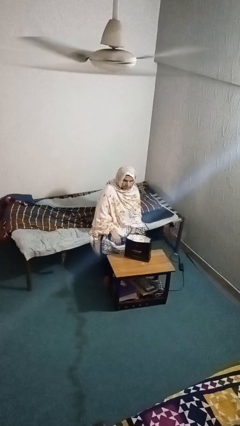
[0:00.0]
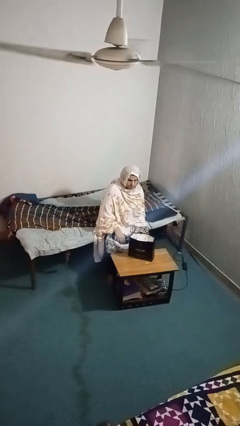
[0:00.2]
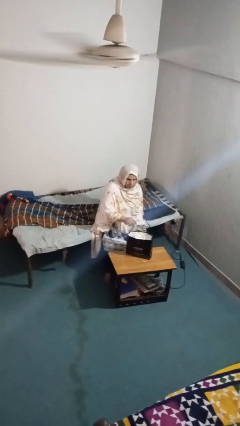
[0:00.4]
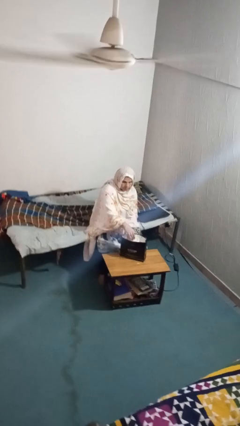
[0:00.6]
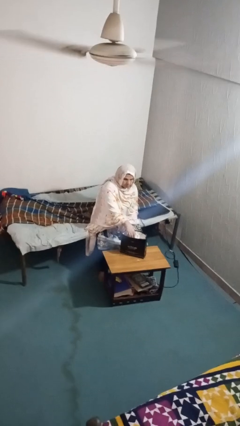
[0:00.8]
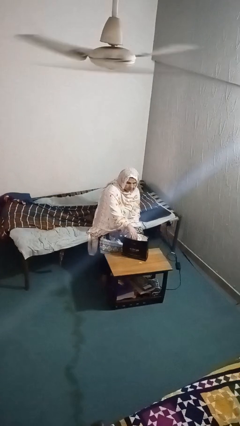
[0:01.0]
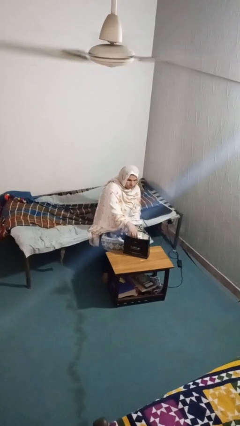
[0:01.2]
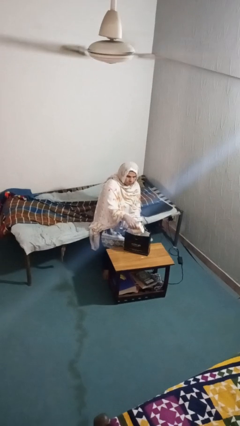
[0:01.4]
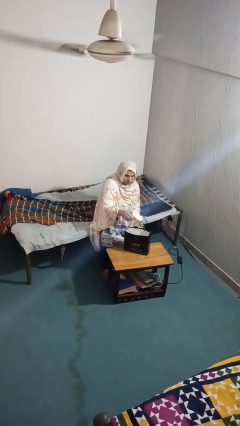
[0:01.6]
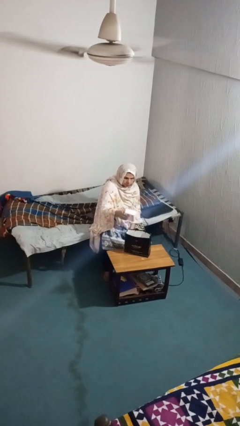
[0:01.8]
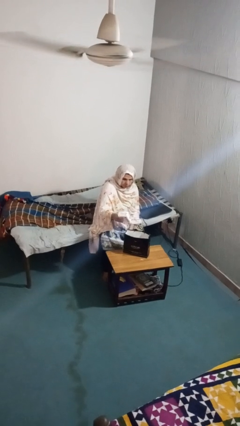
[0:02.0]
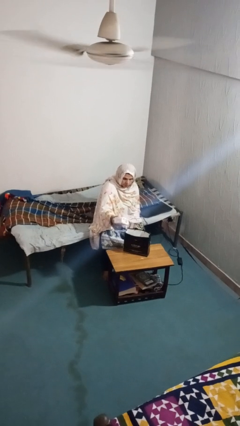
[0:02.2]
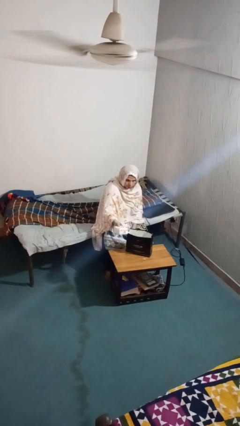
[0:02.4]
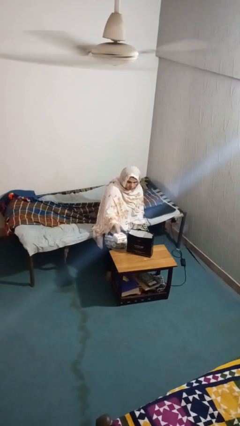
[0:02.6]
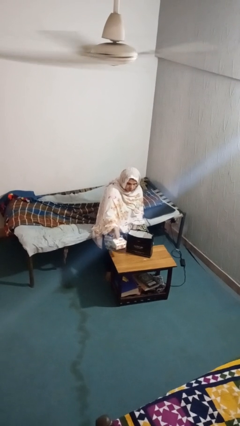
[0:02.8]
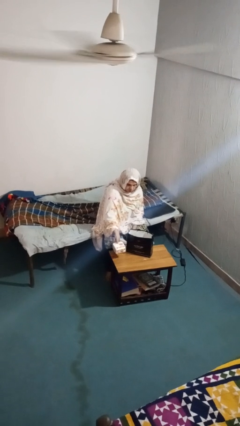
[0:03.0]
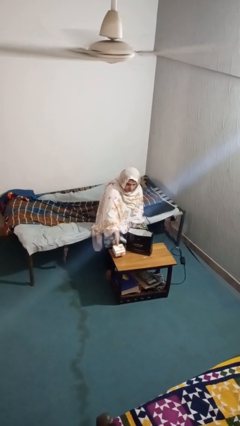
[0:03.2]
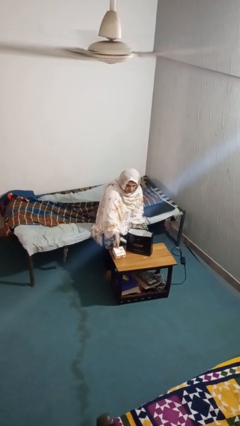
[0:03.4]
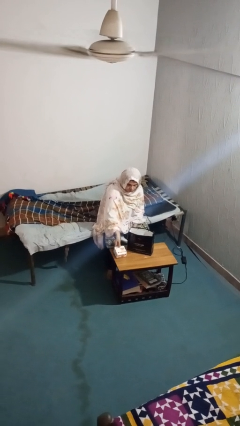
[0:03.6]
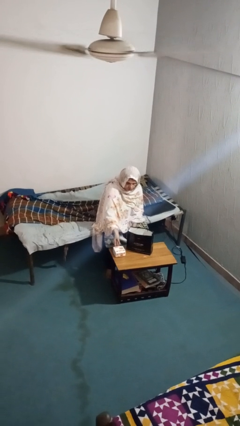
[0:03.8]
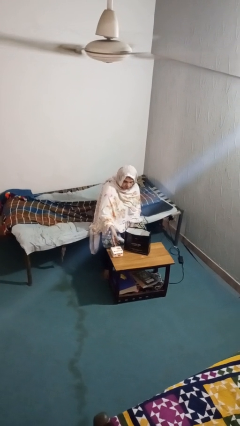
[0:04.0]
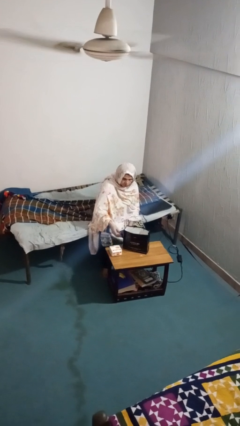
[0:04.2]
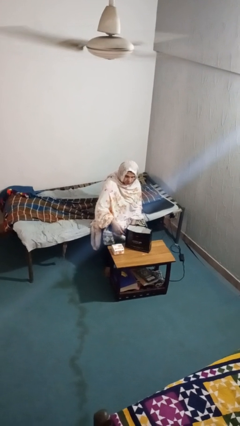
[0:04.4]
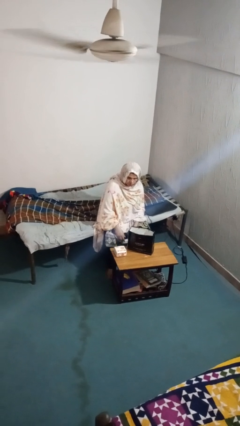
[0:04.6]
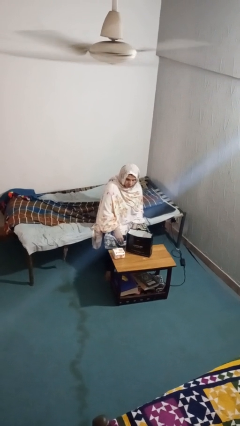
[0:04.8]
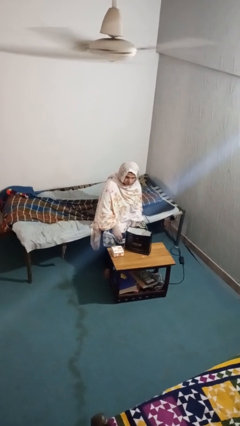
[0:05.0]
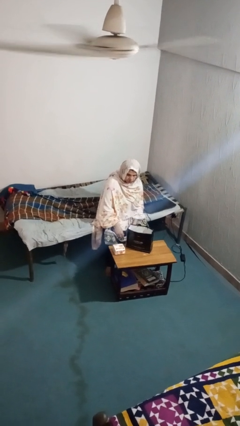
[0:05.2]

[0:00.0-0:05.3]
person takes object from bag

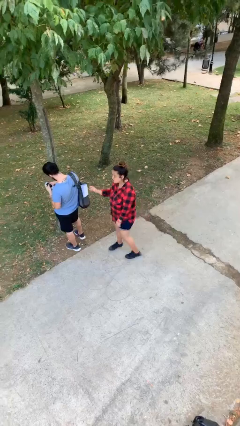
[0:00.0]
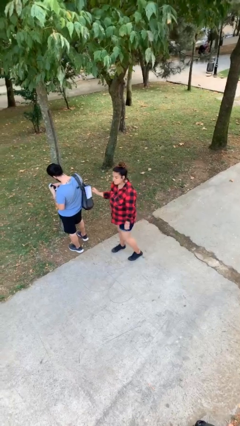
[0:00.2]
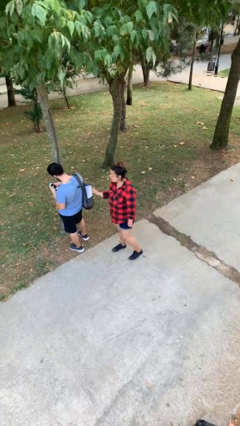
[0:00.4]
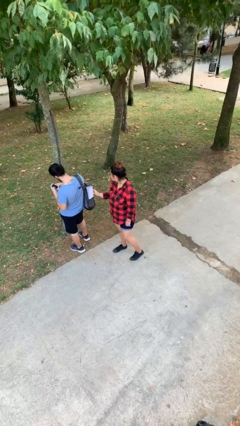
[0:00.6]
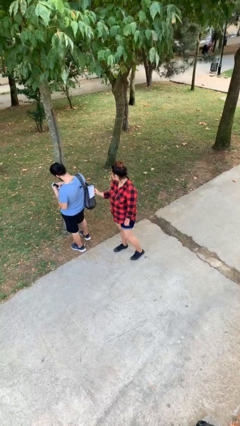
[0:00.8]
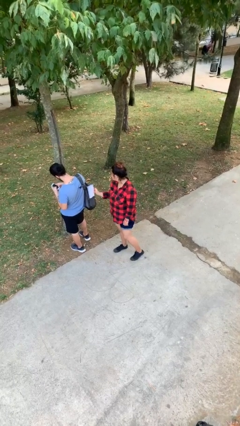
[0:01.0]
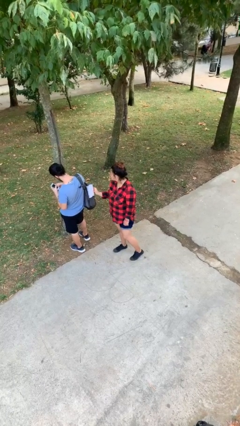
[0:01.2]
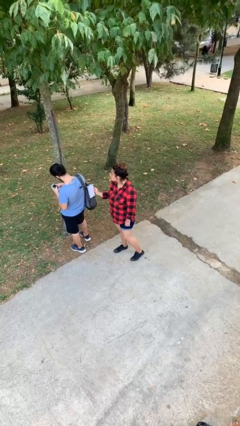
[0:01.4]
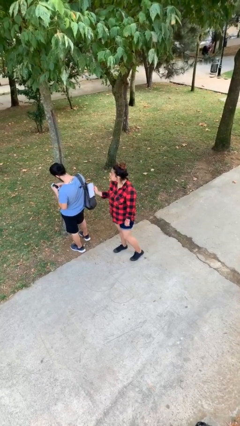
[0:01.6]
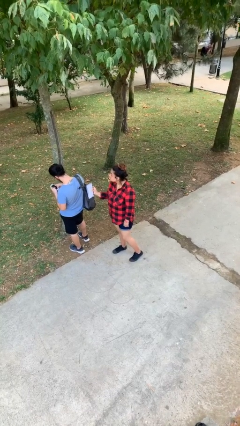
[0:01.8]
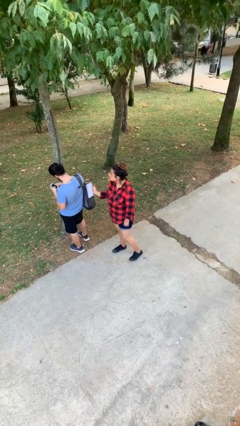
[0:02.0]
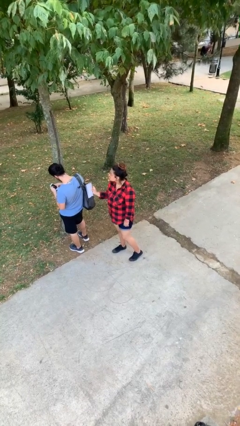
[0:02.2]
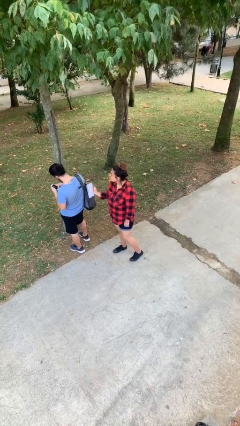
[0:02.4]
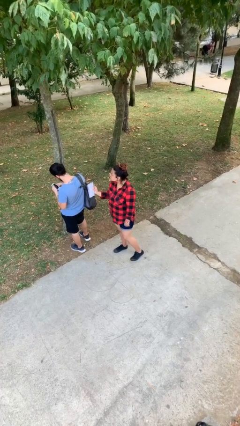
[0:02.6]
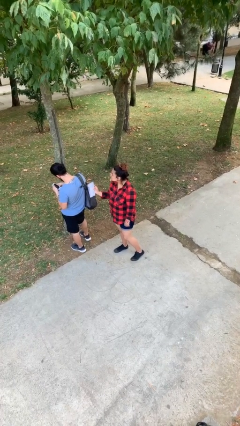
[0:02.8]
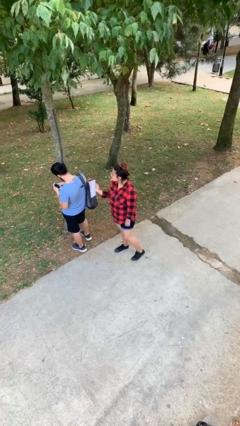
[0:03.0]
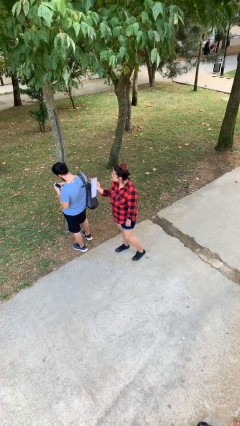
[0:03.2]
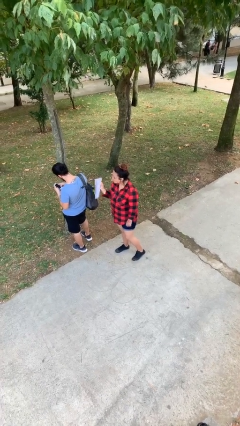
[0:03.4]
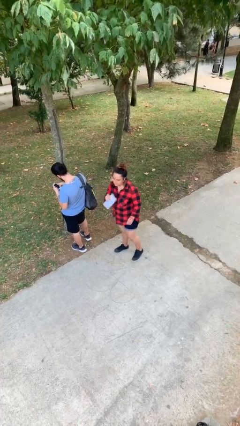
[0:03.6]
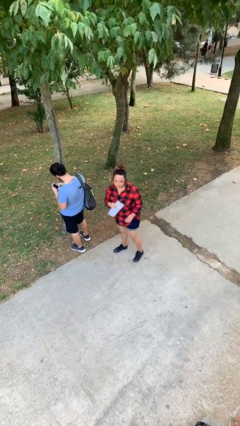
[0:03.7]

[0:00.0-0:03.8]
person steals object from person

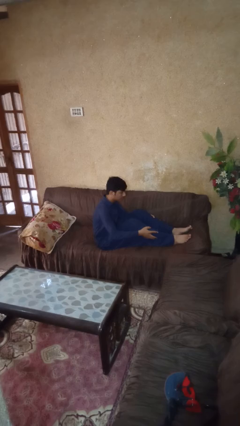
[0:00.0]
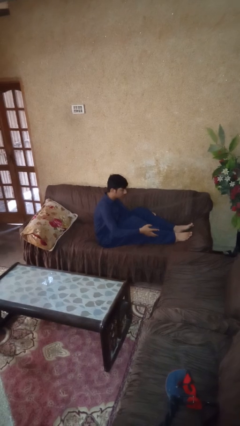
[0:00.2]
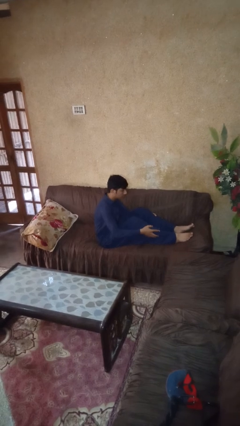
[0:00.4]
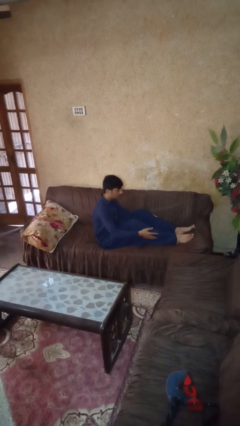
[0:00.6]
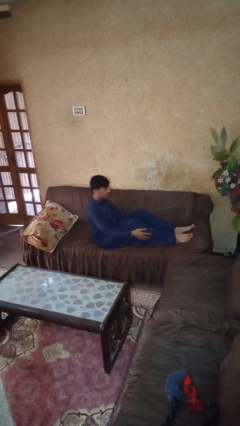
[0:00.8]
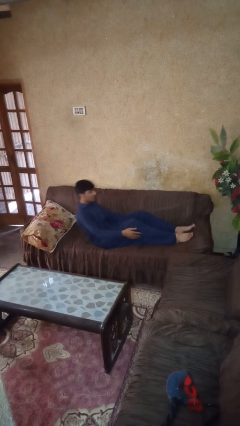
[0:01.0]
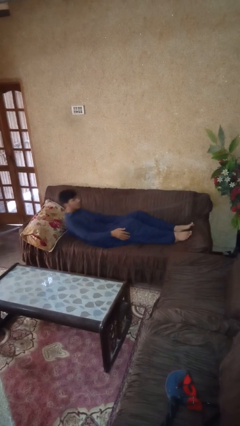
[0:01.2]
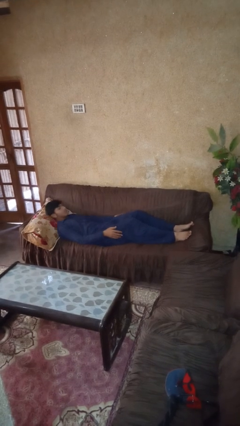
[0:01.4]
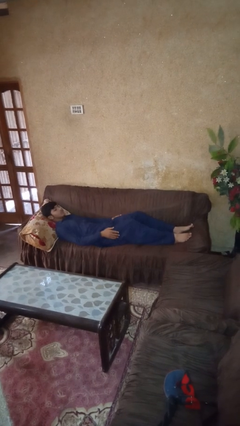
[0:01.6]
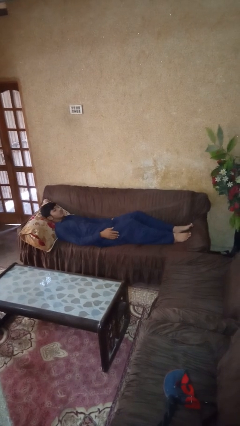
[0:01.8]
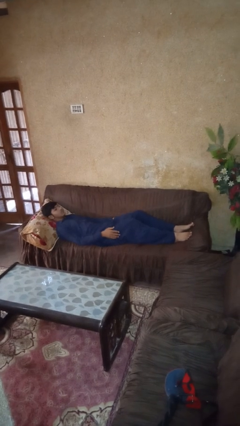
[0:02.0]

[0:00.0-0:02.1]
person lies down on couch

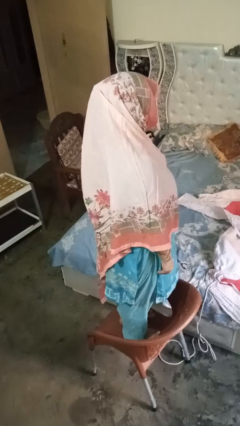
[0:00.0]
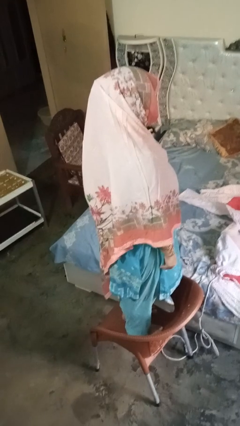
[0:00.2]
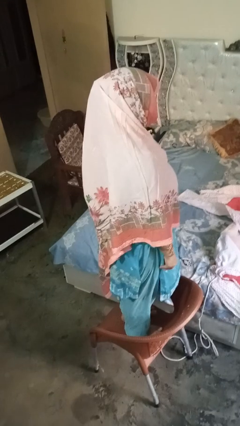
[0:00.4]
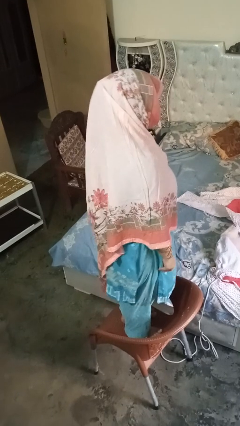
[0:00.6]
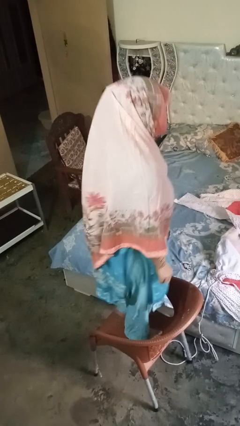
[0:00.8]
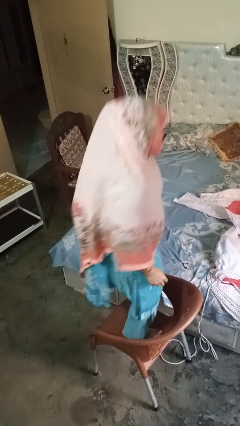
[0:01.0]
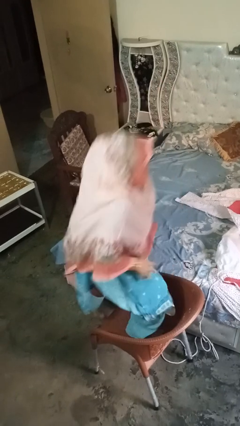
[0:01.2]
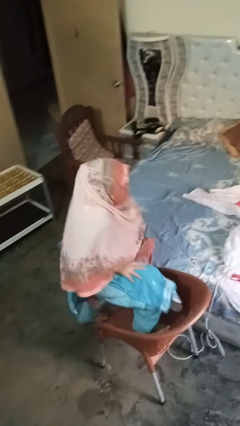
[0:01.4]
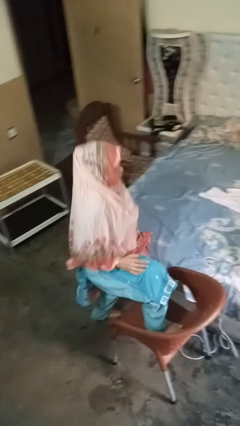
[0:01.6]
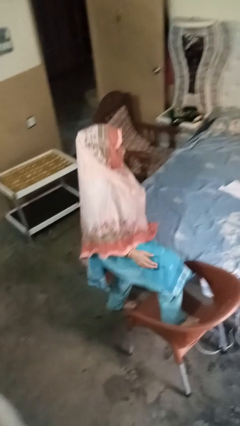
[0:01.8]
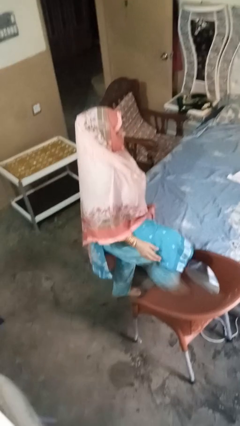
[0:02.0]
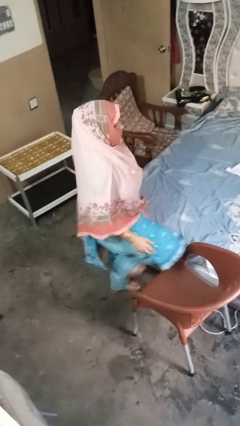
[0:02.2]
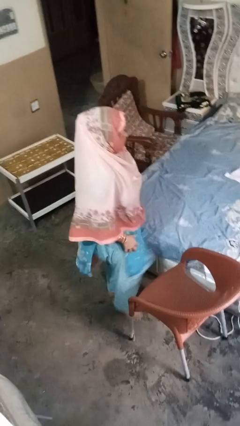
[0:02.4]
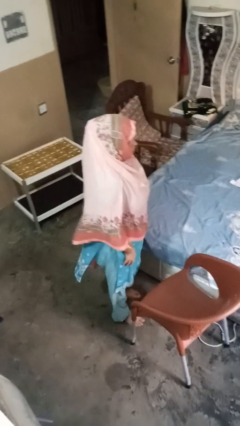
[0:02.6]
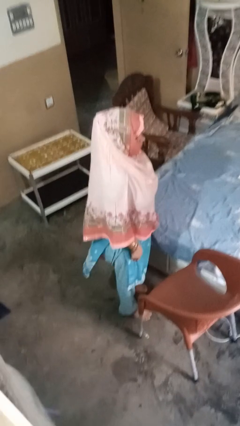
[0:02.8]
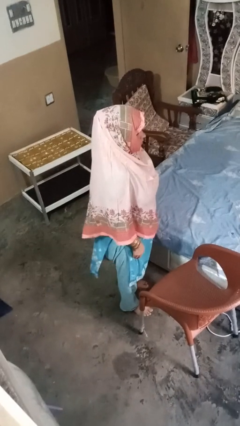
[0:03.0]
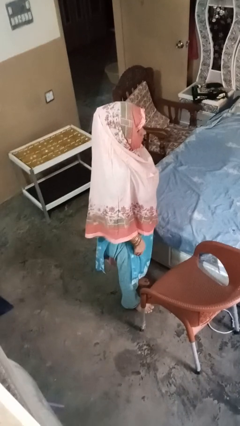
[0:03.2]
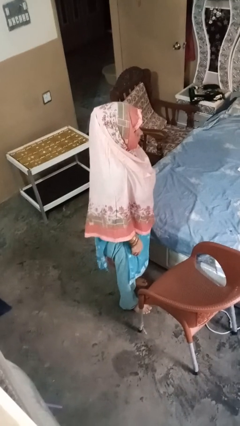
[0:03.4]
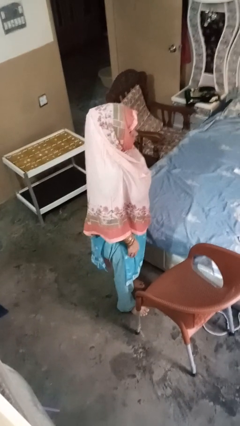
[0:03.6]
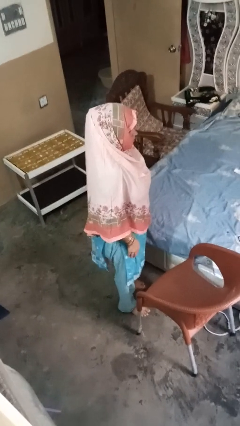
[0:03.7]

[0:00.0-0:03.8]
person climbs off chair

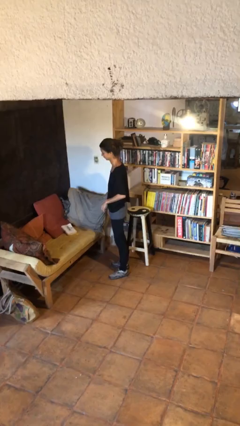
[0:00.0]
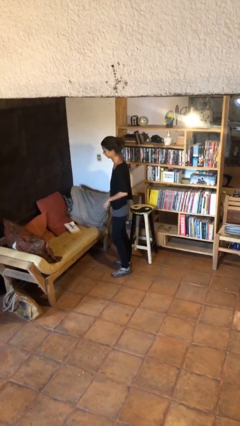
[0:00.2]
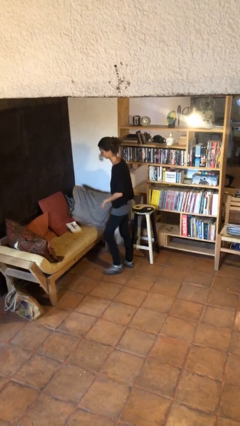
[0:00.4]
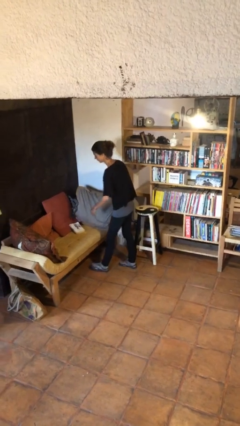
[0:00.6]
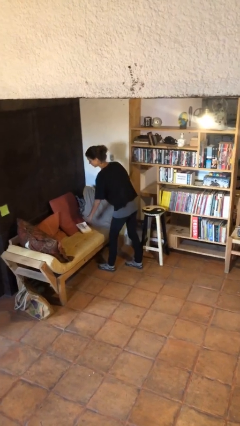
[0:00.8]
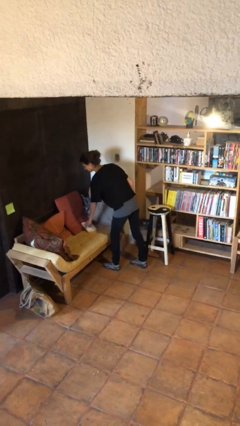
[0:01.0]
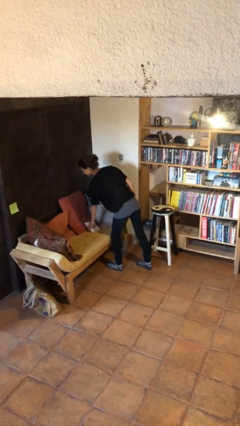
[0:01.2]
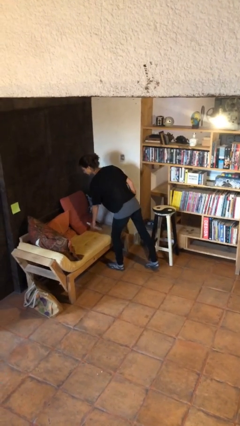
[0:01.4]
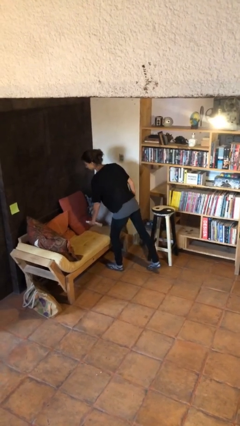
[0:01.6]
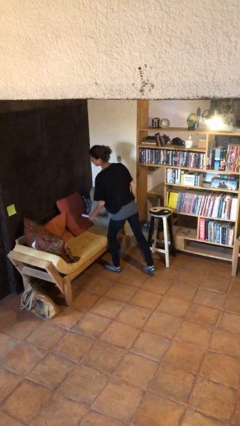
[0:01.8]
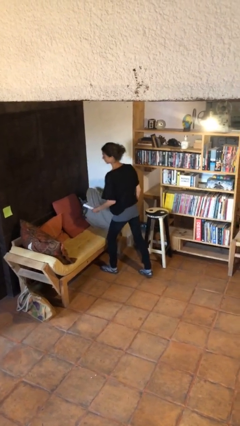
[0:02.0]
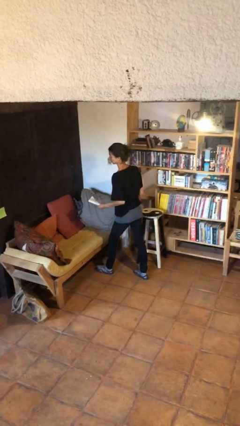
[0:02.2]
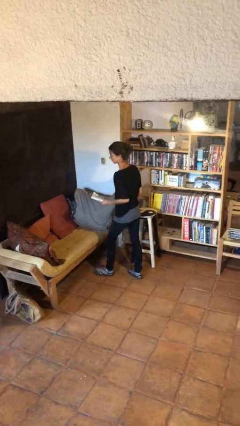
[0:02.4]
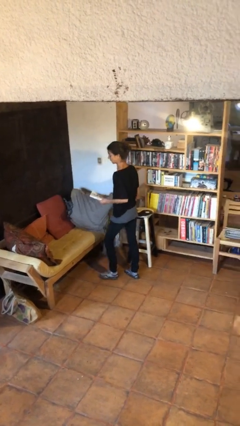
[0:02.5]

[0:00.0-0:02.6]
person picks up object from couch
